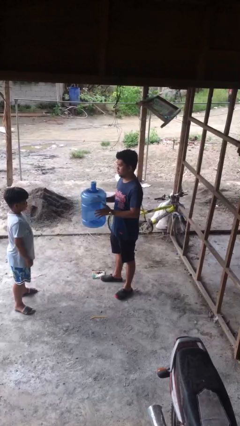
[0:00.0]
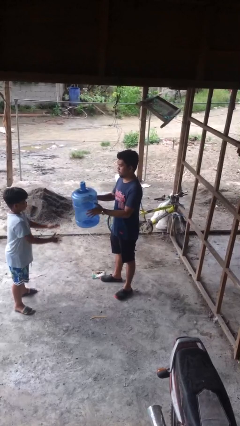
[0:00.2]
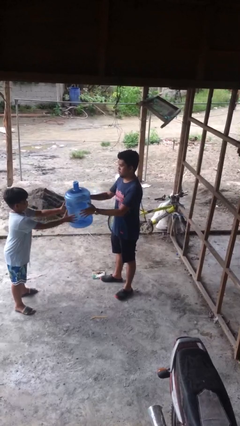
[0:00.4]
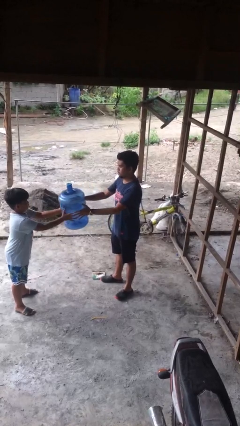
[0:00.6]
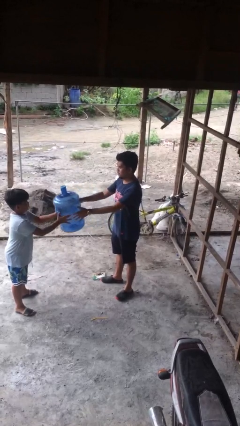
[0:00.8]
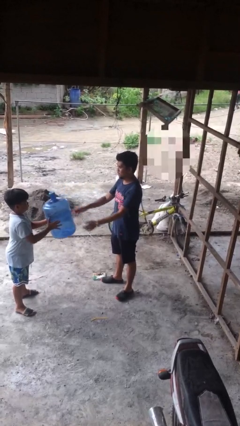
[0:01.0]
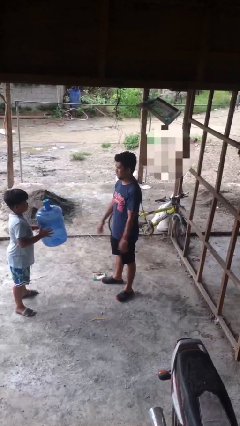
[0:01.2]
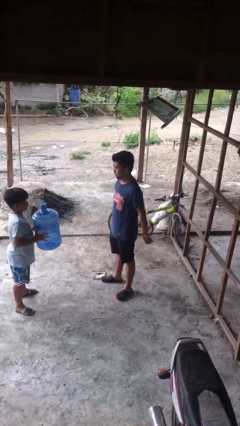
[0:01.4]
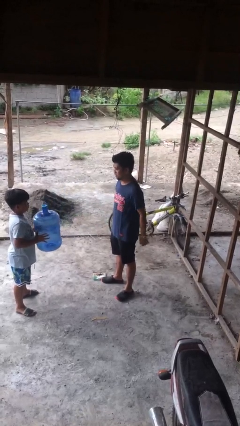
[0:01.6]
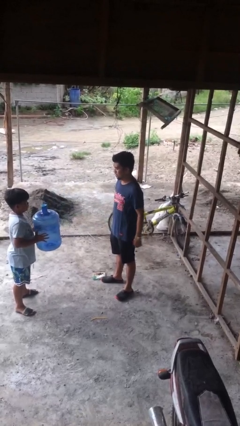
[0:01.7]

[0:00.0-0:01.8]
person transfers object to person

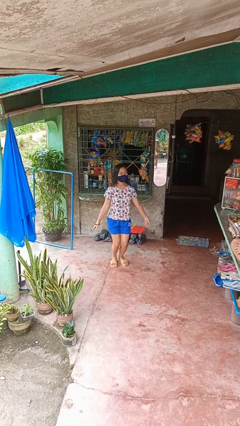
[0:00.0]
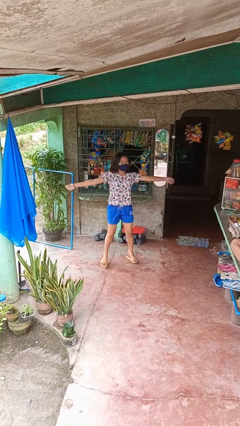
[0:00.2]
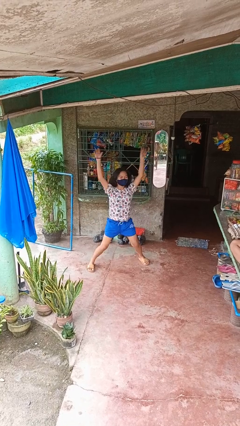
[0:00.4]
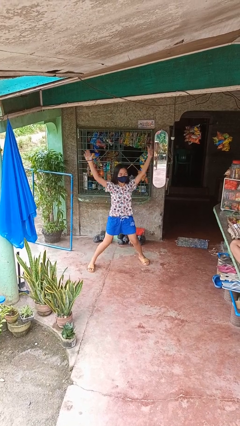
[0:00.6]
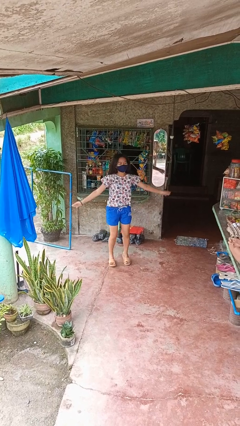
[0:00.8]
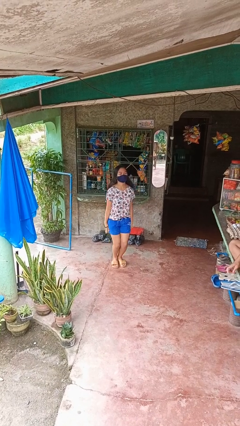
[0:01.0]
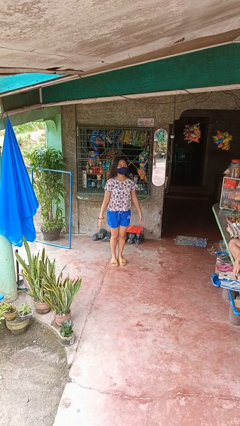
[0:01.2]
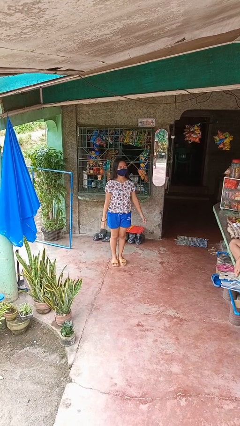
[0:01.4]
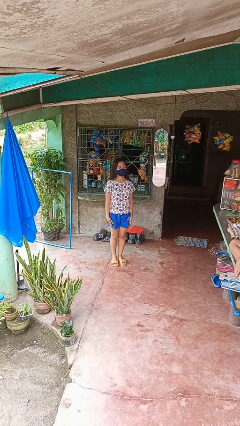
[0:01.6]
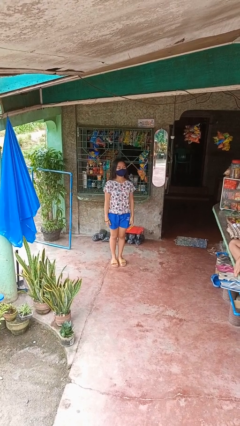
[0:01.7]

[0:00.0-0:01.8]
person exercises with jumping jacks

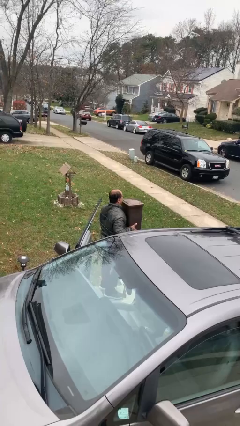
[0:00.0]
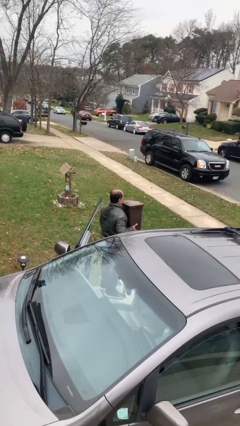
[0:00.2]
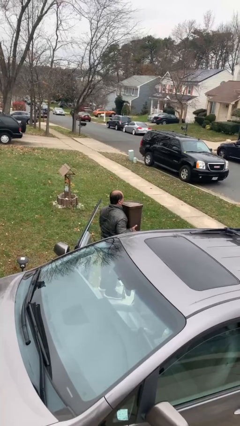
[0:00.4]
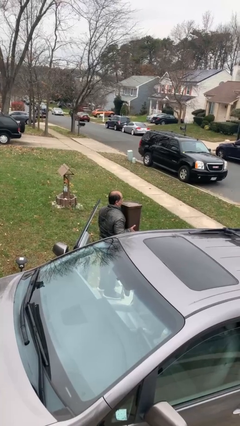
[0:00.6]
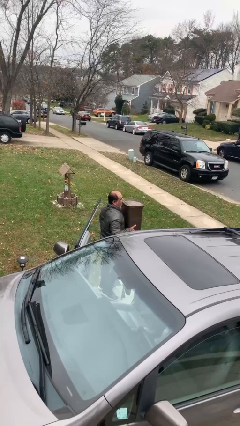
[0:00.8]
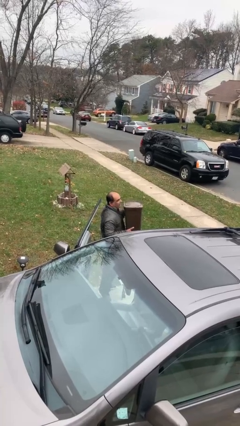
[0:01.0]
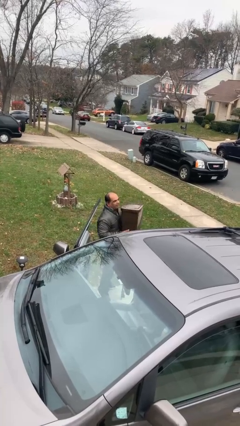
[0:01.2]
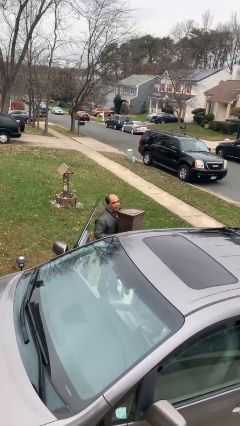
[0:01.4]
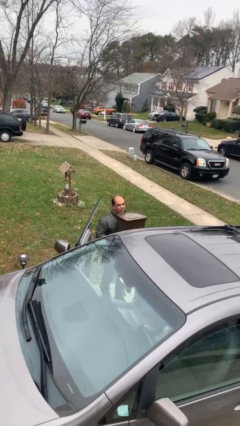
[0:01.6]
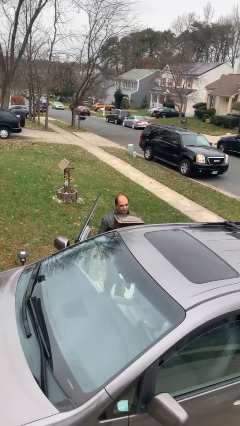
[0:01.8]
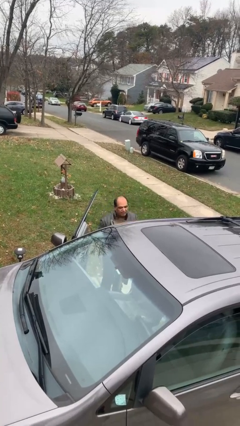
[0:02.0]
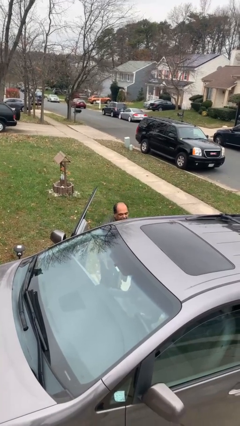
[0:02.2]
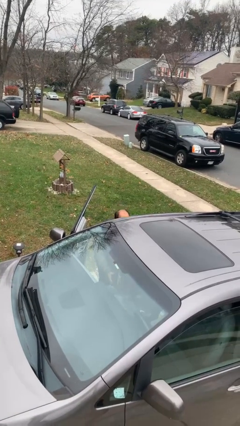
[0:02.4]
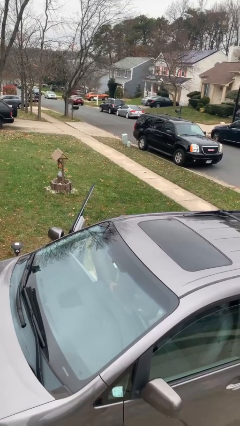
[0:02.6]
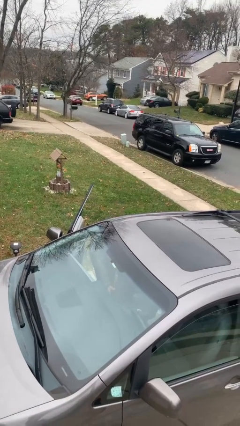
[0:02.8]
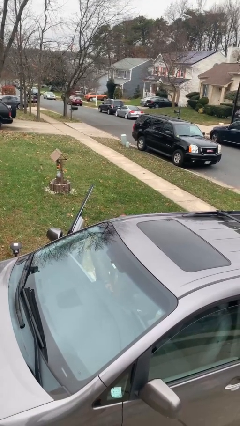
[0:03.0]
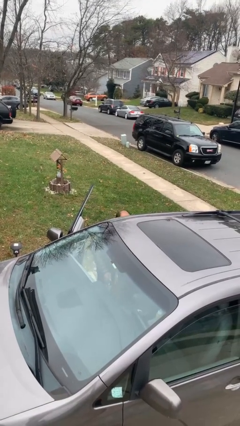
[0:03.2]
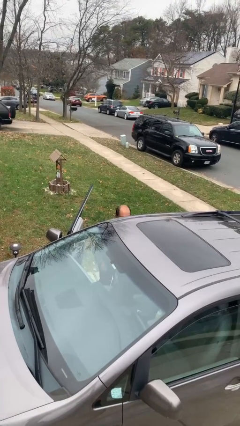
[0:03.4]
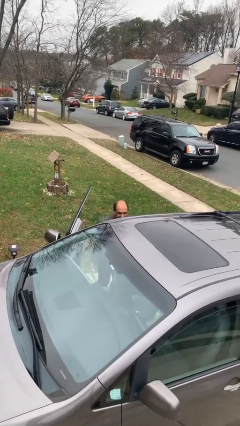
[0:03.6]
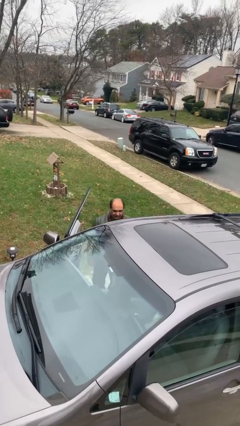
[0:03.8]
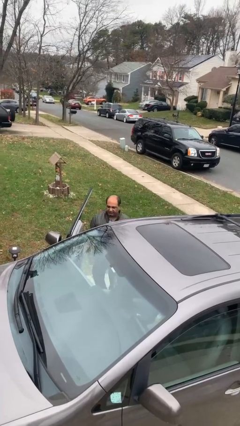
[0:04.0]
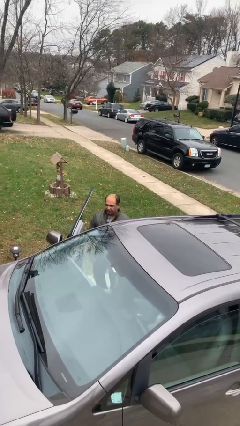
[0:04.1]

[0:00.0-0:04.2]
person loads car

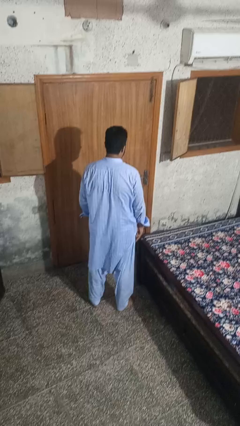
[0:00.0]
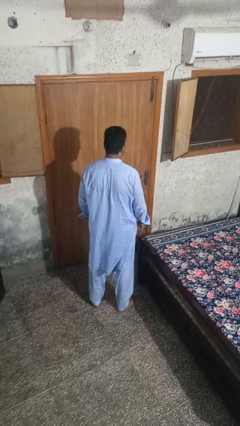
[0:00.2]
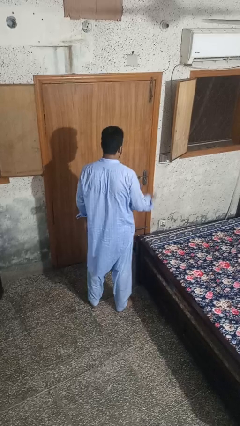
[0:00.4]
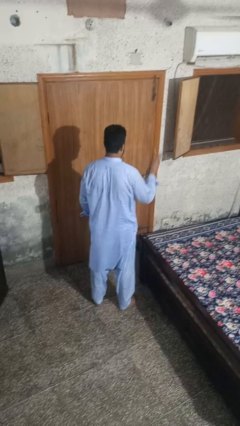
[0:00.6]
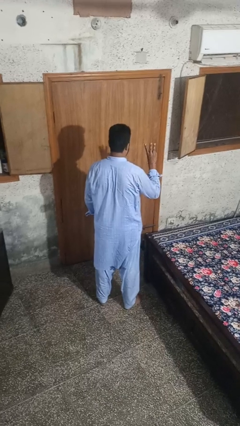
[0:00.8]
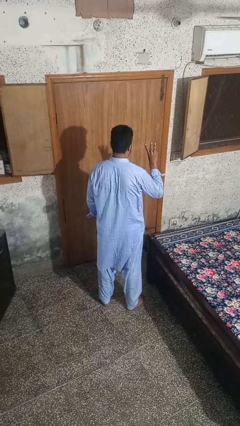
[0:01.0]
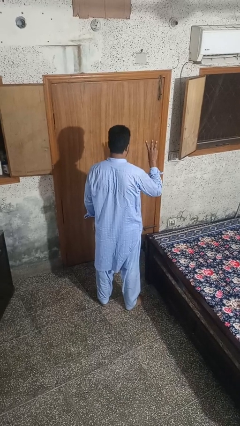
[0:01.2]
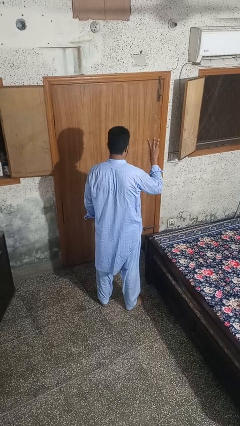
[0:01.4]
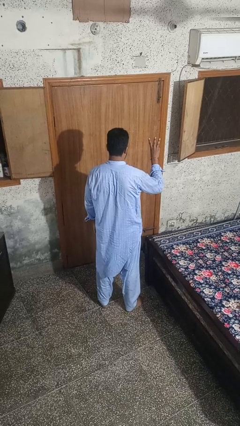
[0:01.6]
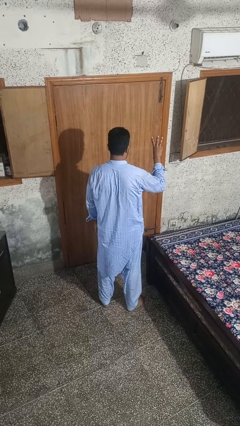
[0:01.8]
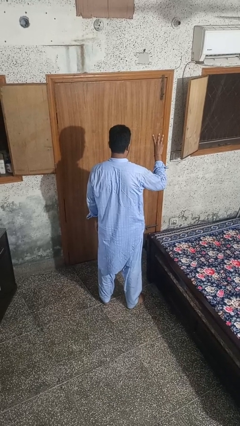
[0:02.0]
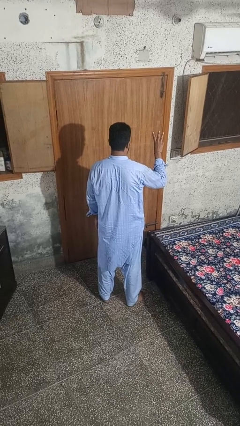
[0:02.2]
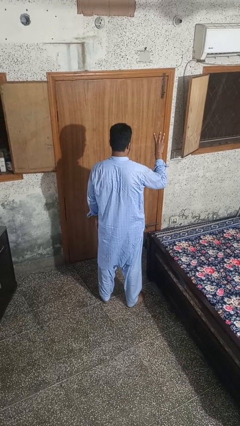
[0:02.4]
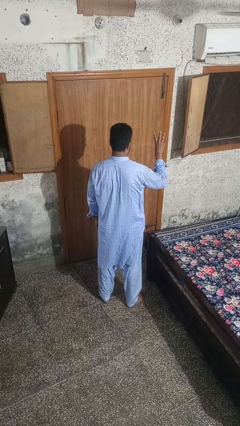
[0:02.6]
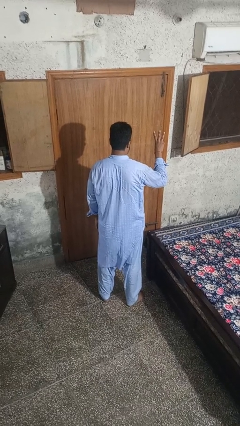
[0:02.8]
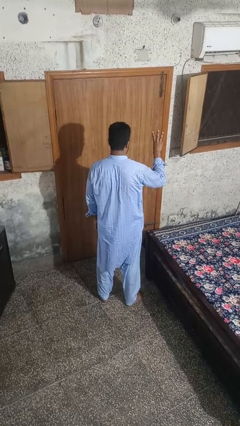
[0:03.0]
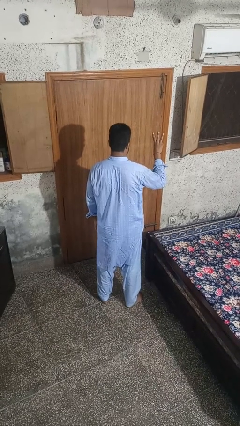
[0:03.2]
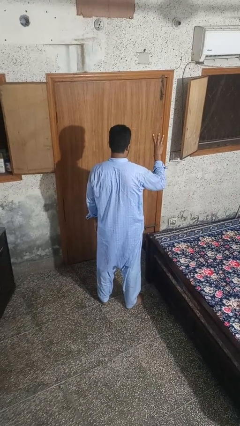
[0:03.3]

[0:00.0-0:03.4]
person gestures number three

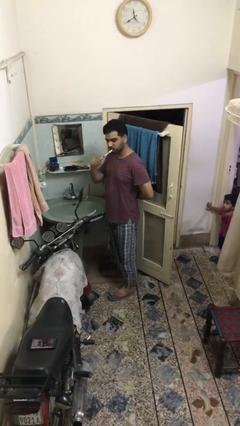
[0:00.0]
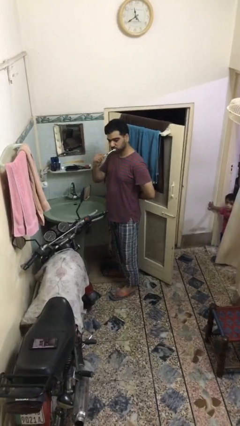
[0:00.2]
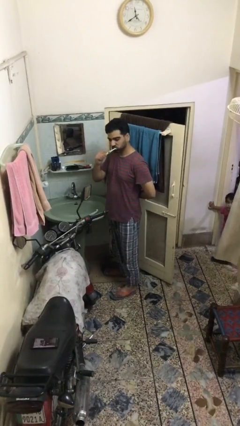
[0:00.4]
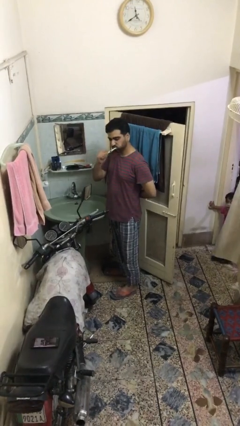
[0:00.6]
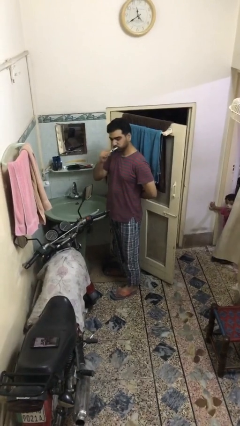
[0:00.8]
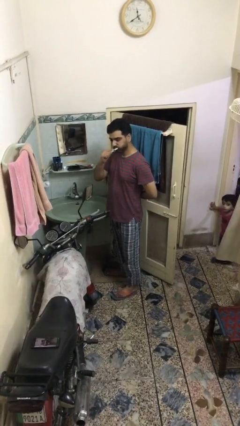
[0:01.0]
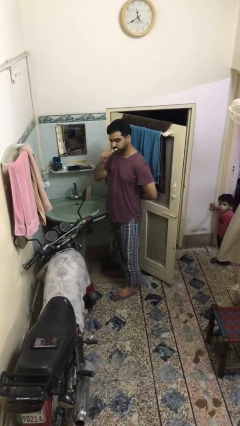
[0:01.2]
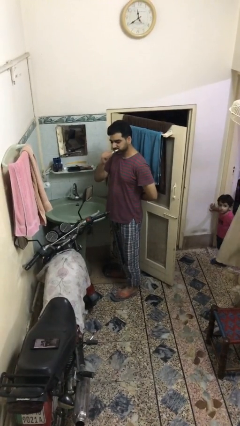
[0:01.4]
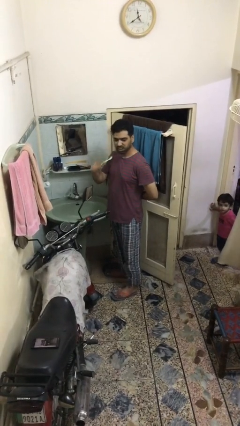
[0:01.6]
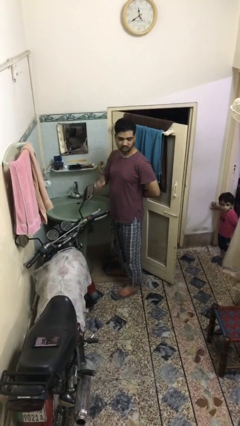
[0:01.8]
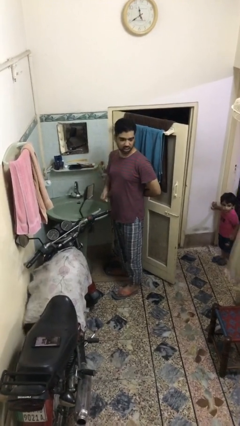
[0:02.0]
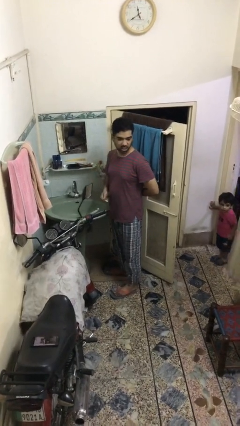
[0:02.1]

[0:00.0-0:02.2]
person brushes teeth

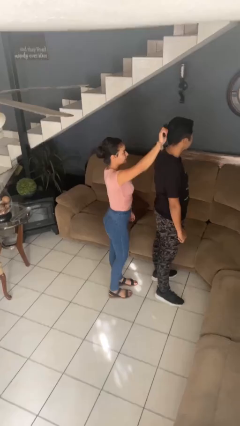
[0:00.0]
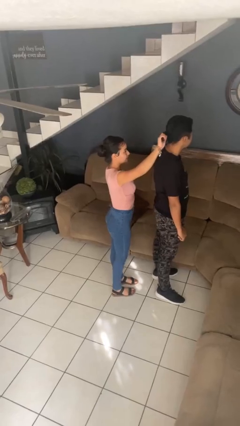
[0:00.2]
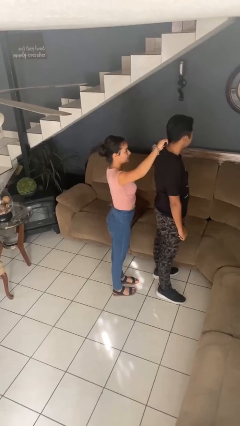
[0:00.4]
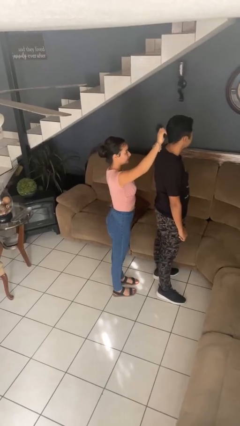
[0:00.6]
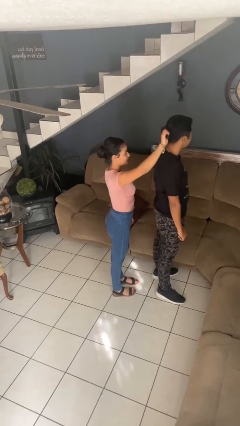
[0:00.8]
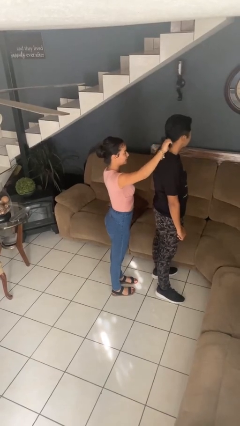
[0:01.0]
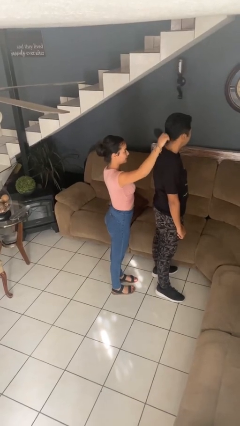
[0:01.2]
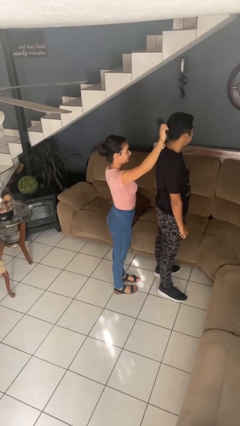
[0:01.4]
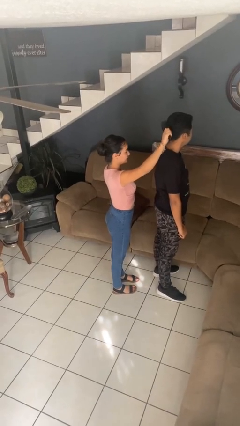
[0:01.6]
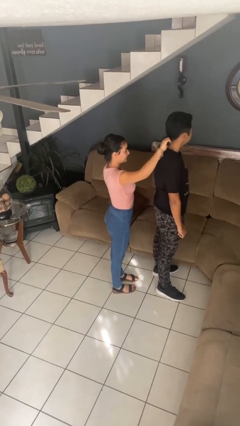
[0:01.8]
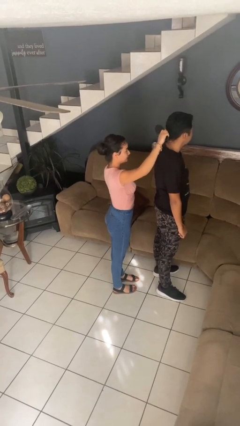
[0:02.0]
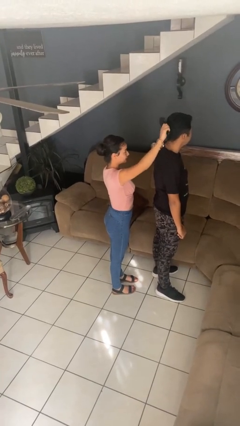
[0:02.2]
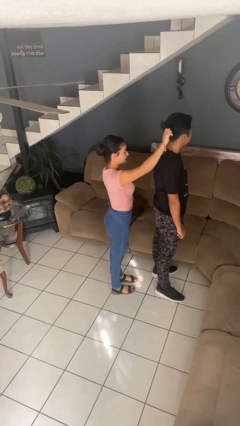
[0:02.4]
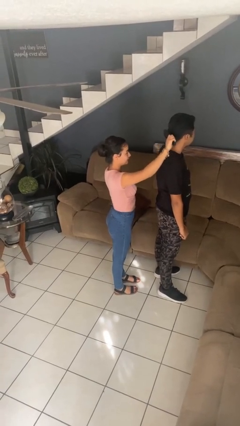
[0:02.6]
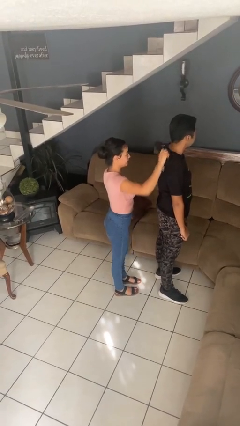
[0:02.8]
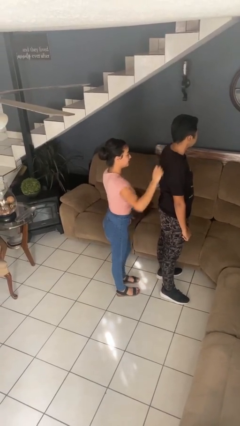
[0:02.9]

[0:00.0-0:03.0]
person brushes hair of person

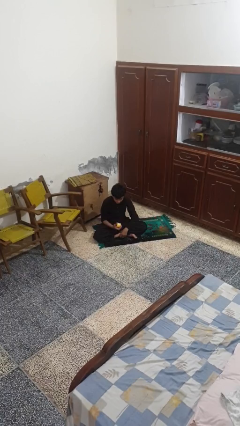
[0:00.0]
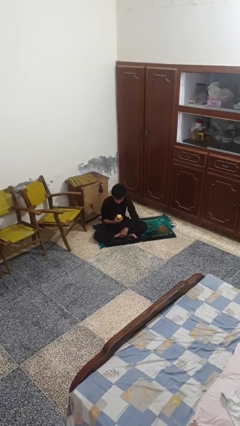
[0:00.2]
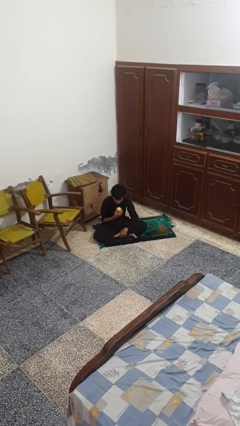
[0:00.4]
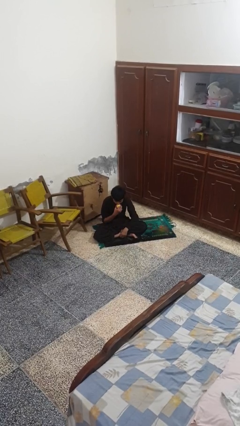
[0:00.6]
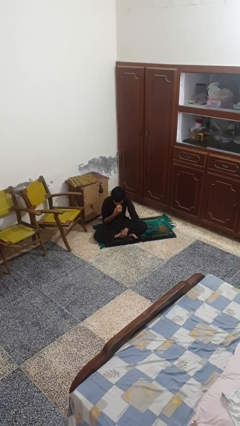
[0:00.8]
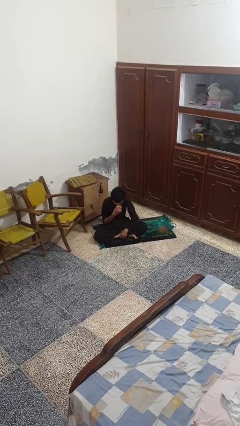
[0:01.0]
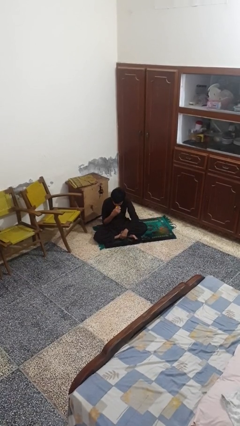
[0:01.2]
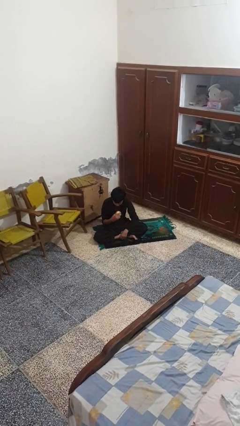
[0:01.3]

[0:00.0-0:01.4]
person eats apple
